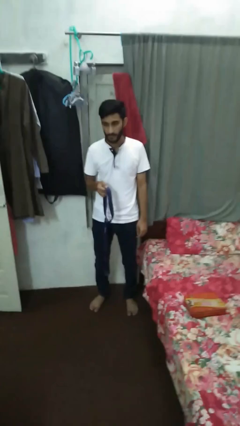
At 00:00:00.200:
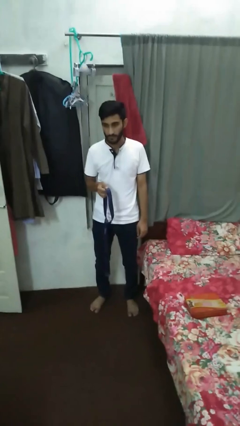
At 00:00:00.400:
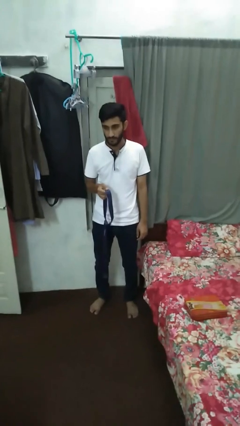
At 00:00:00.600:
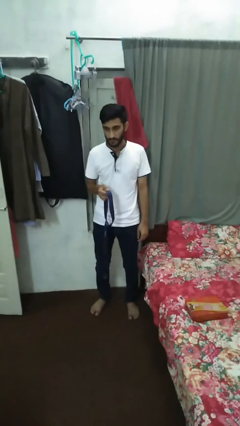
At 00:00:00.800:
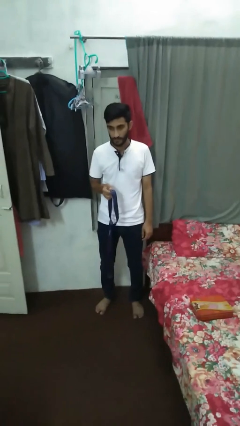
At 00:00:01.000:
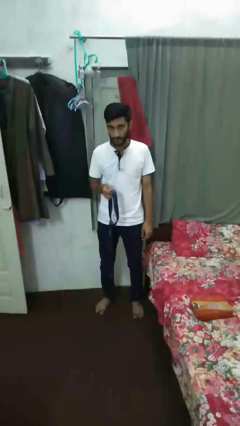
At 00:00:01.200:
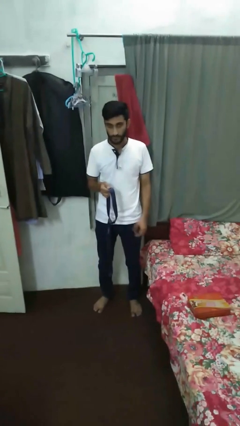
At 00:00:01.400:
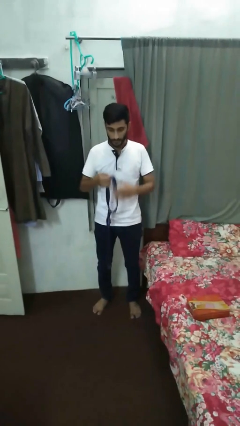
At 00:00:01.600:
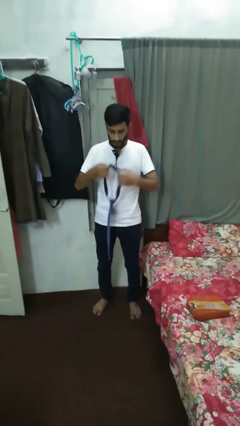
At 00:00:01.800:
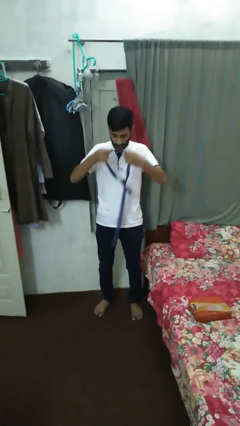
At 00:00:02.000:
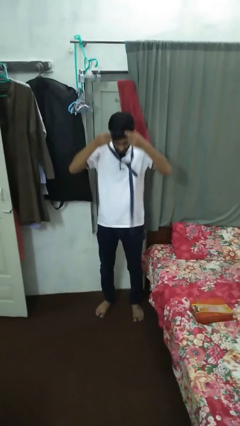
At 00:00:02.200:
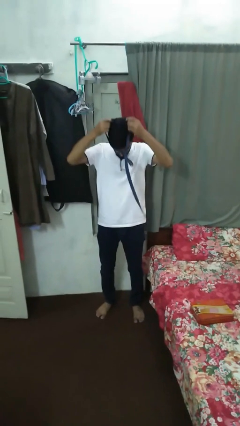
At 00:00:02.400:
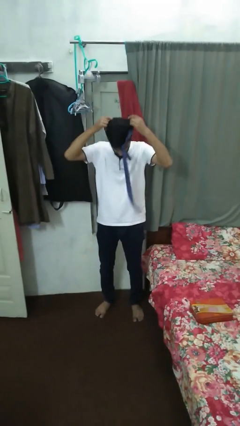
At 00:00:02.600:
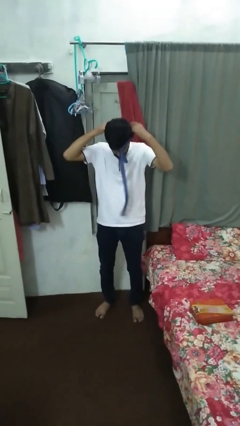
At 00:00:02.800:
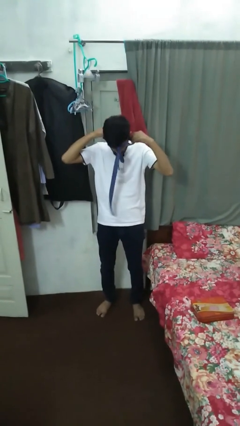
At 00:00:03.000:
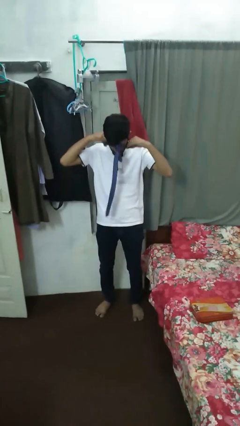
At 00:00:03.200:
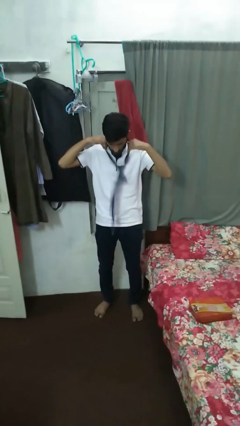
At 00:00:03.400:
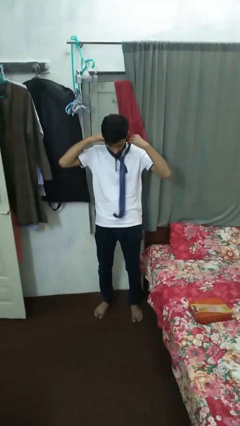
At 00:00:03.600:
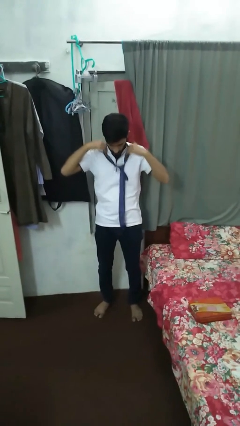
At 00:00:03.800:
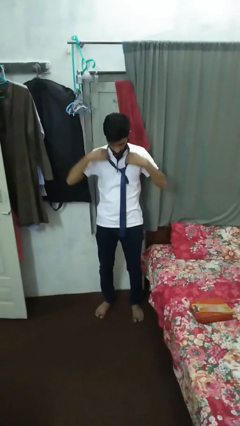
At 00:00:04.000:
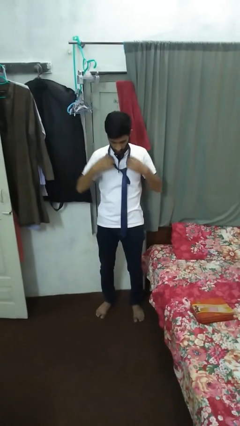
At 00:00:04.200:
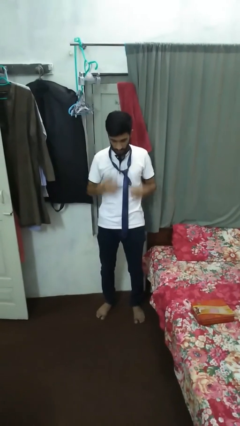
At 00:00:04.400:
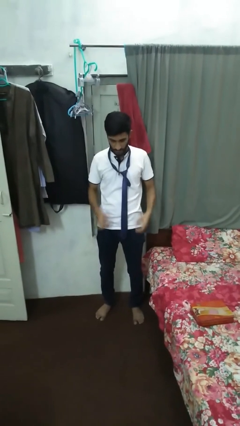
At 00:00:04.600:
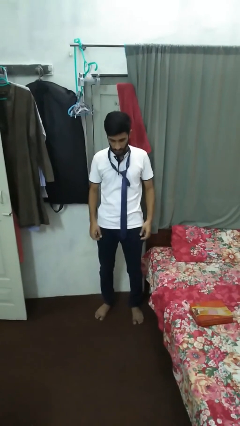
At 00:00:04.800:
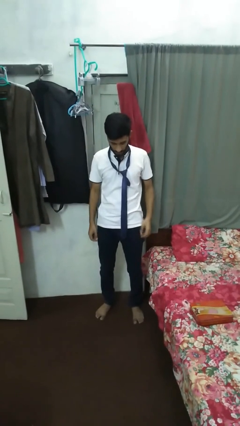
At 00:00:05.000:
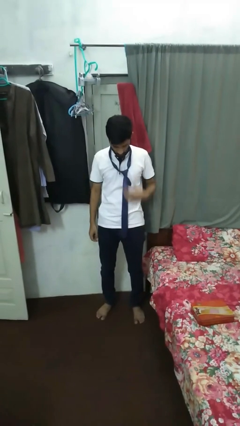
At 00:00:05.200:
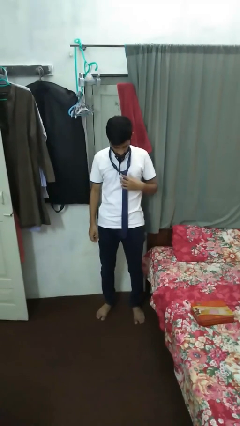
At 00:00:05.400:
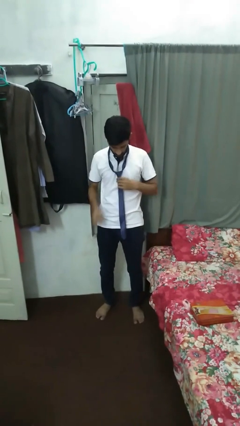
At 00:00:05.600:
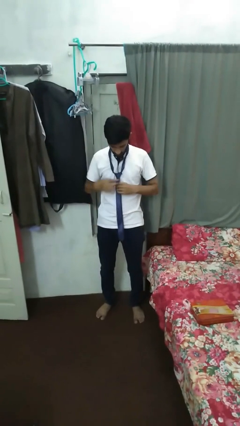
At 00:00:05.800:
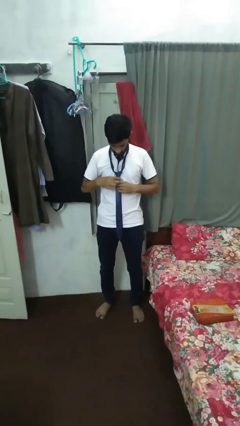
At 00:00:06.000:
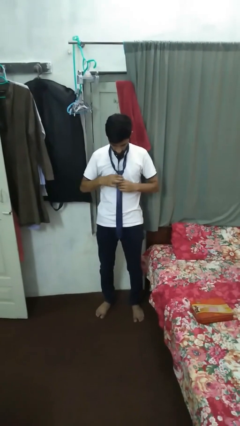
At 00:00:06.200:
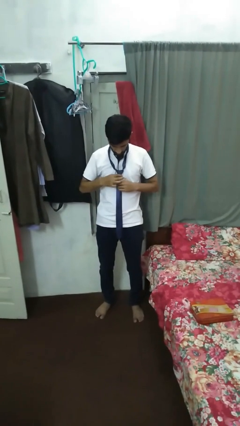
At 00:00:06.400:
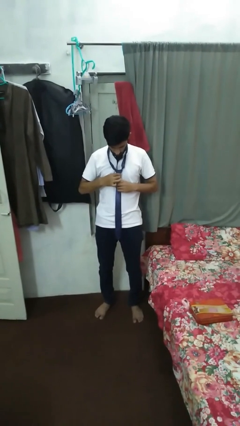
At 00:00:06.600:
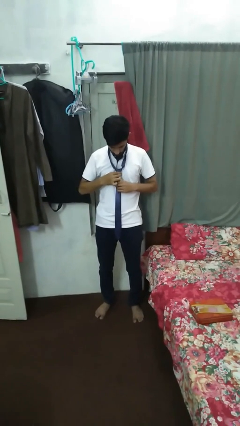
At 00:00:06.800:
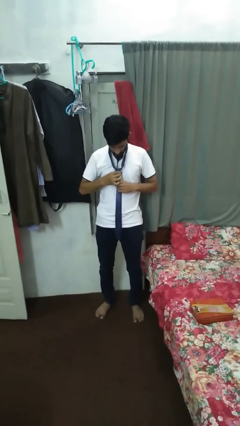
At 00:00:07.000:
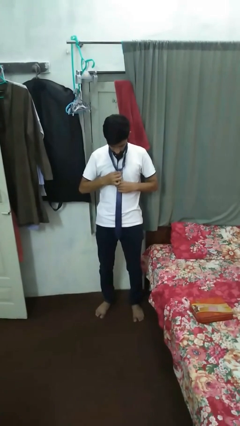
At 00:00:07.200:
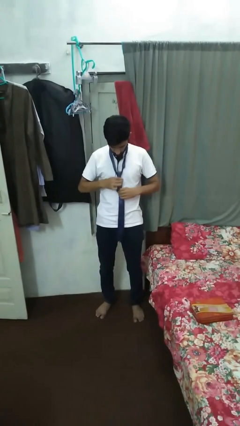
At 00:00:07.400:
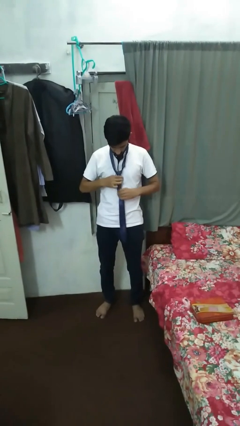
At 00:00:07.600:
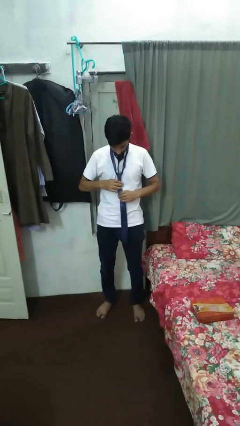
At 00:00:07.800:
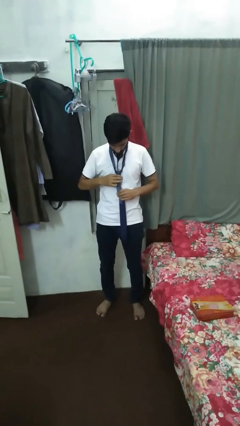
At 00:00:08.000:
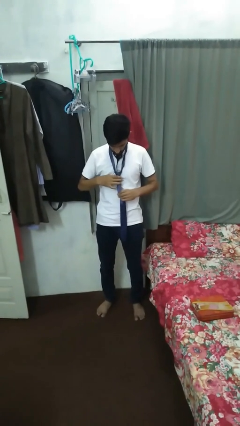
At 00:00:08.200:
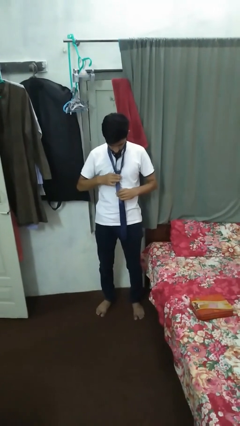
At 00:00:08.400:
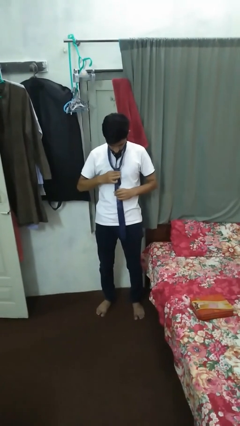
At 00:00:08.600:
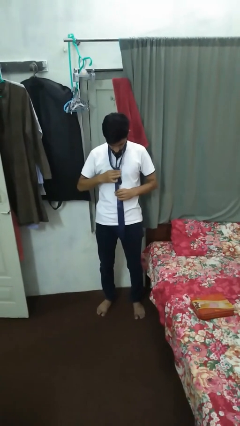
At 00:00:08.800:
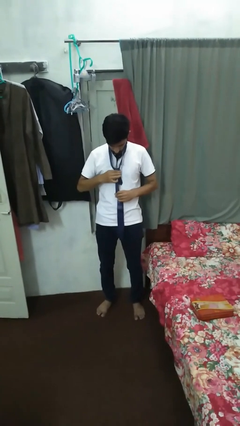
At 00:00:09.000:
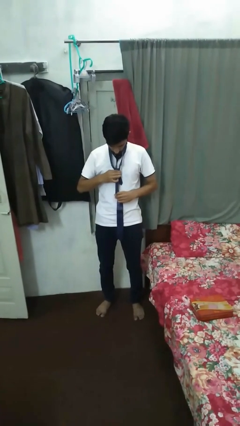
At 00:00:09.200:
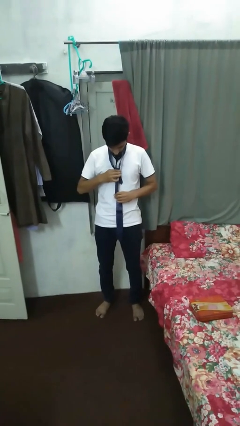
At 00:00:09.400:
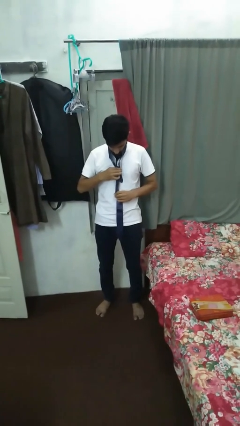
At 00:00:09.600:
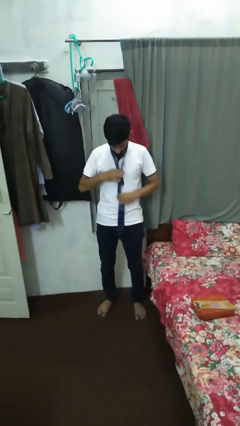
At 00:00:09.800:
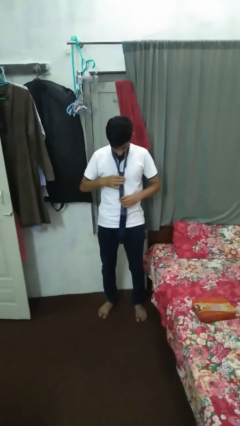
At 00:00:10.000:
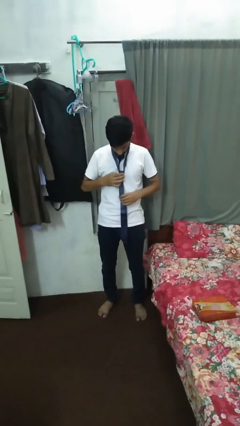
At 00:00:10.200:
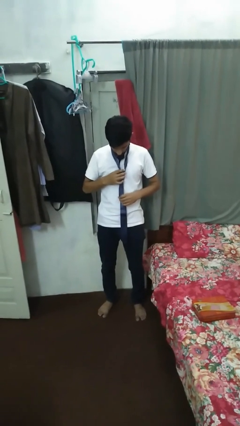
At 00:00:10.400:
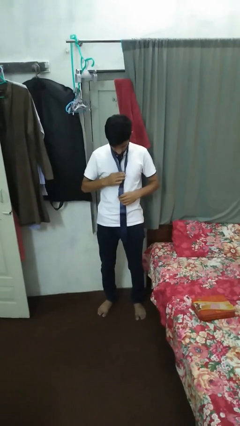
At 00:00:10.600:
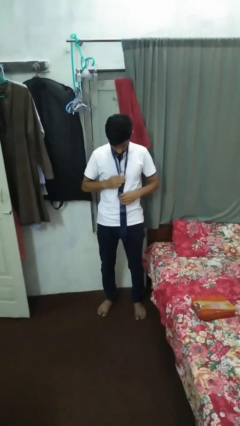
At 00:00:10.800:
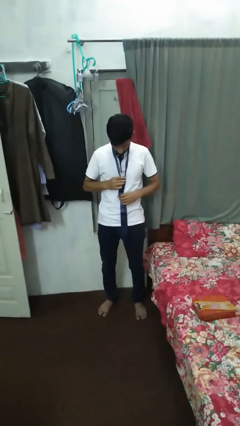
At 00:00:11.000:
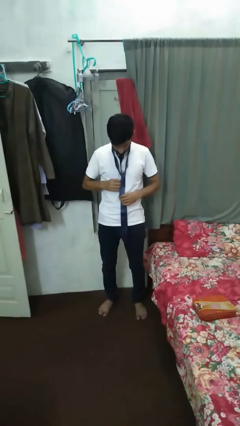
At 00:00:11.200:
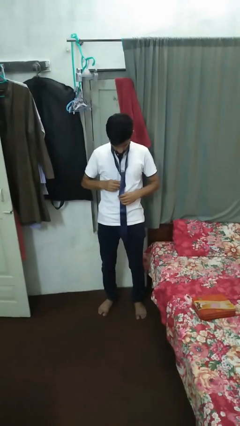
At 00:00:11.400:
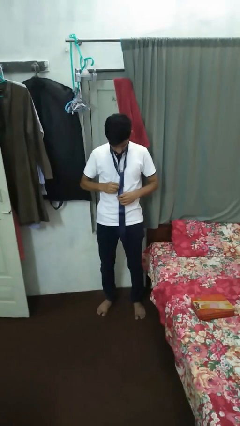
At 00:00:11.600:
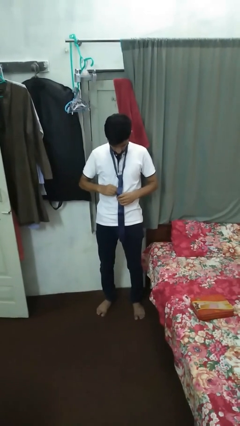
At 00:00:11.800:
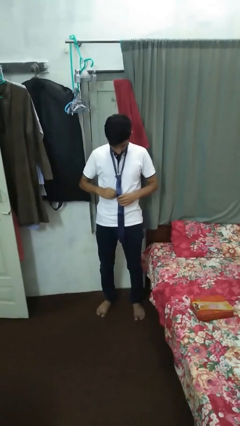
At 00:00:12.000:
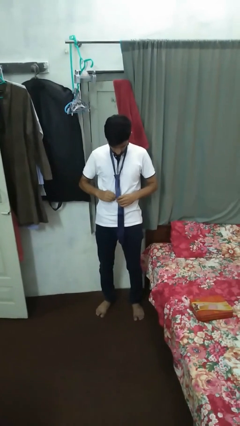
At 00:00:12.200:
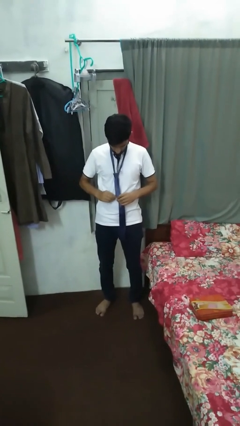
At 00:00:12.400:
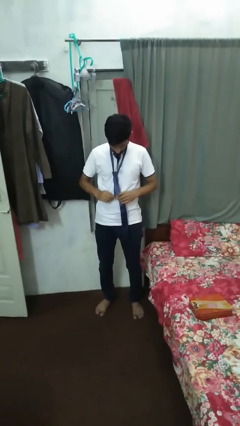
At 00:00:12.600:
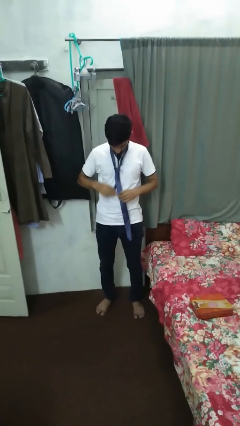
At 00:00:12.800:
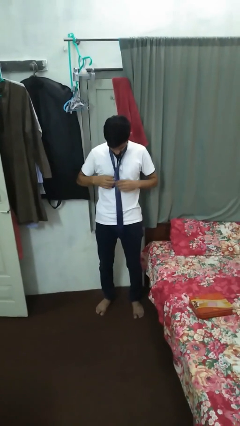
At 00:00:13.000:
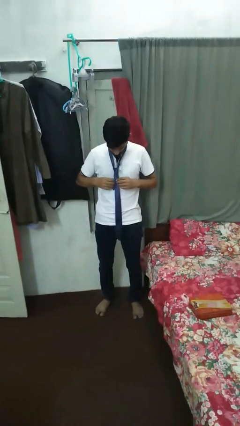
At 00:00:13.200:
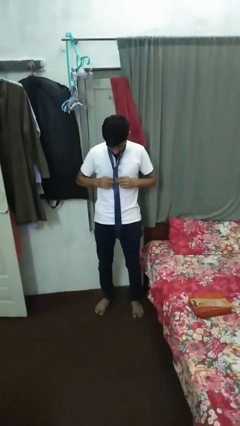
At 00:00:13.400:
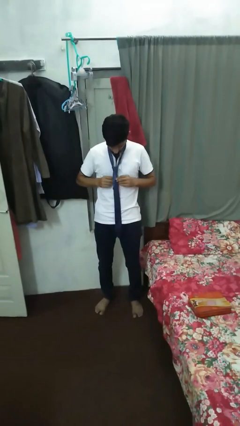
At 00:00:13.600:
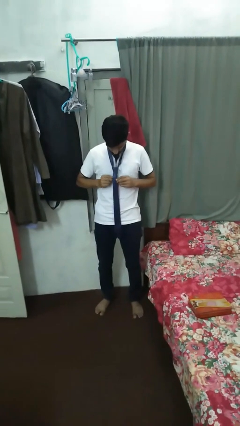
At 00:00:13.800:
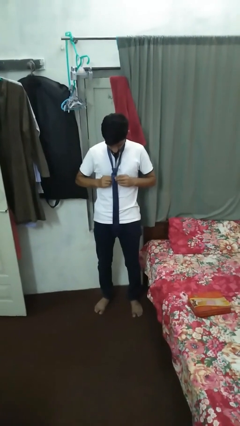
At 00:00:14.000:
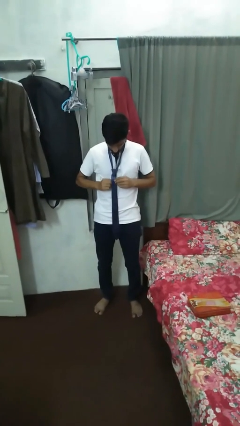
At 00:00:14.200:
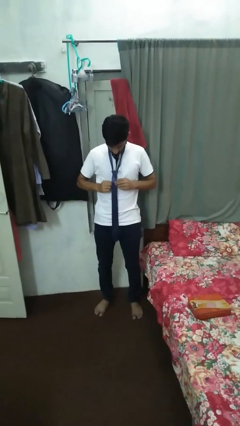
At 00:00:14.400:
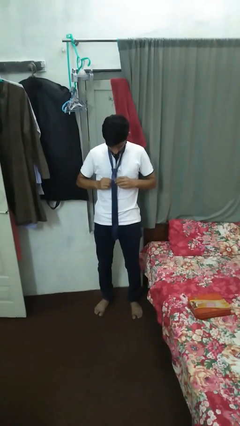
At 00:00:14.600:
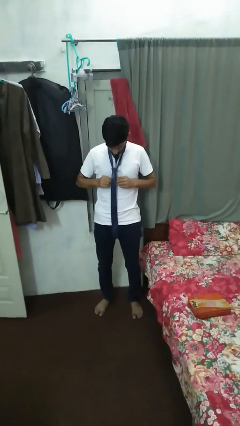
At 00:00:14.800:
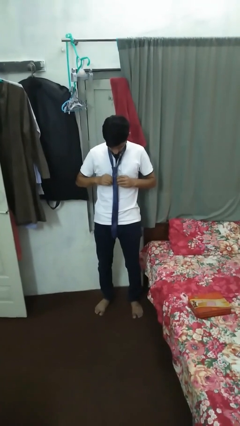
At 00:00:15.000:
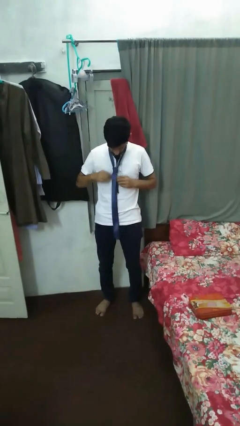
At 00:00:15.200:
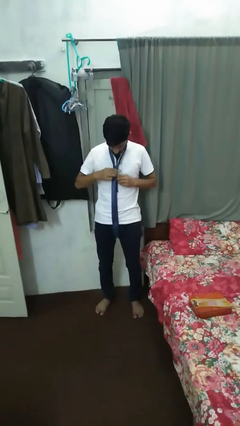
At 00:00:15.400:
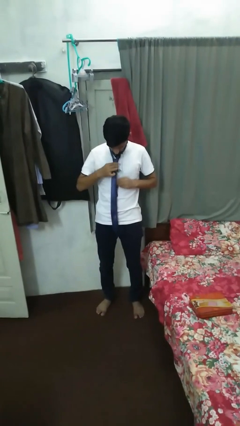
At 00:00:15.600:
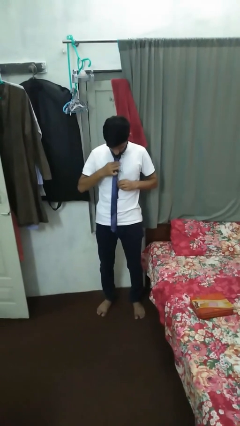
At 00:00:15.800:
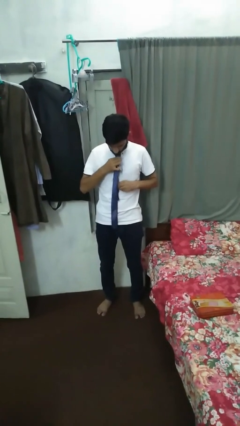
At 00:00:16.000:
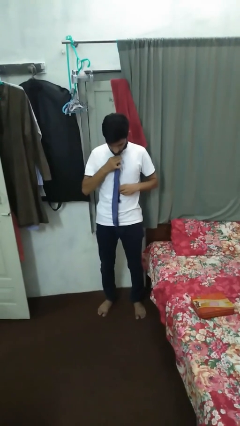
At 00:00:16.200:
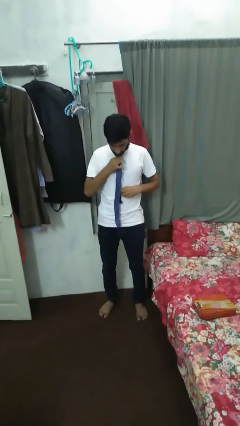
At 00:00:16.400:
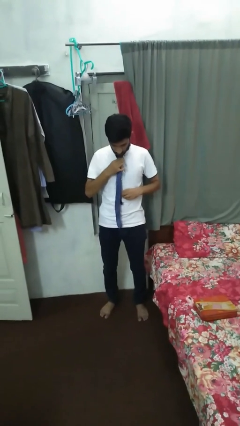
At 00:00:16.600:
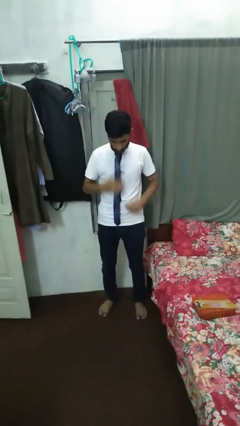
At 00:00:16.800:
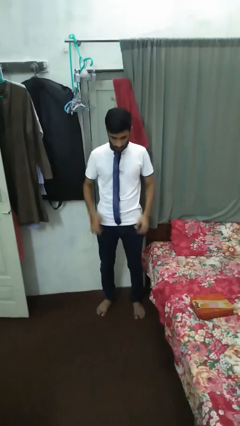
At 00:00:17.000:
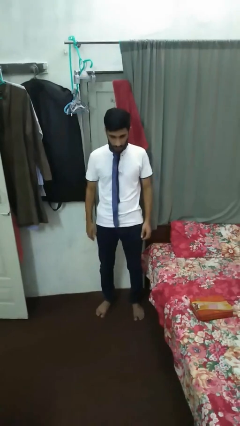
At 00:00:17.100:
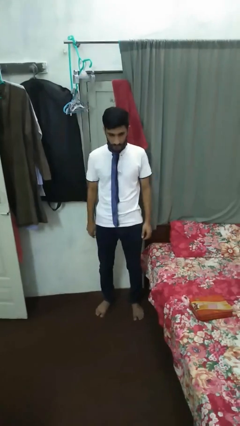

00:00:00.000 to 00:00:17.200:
person puts on necktie

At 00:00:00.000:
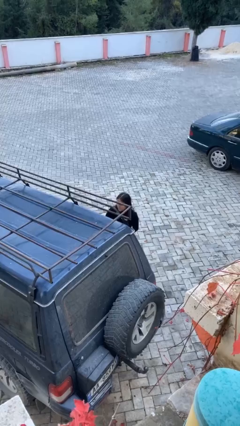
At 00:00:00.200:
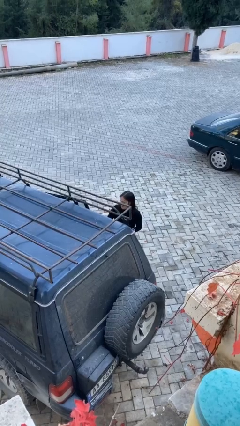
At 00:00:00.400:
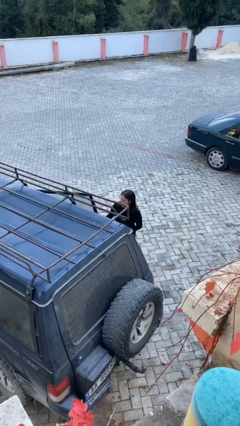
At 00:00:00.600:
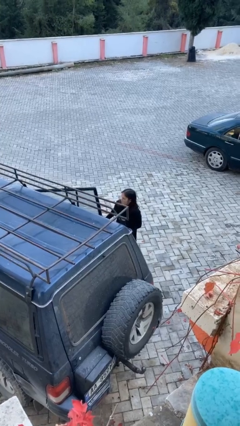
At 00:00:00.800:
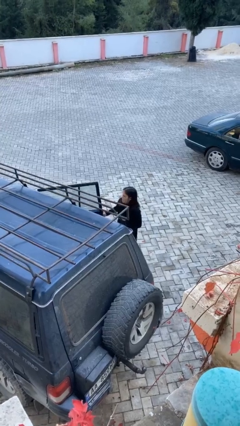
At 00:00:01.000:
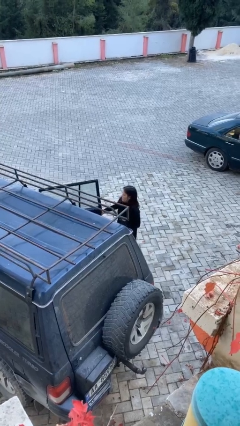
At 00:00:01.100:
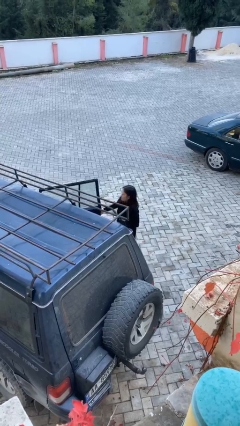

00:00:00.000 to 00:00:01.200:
person opens car door
